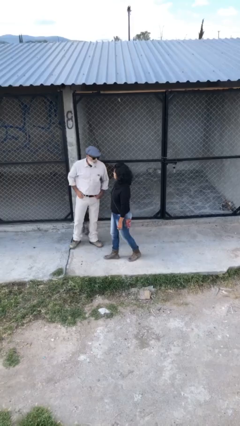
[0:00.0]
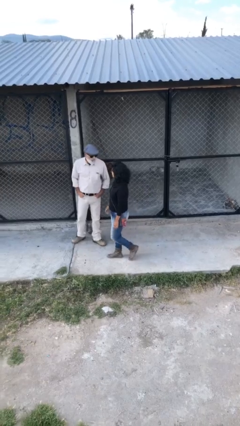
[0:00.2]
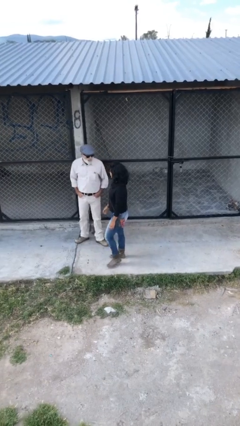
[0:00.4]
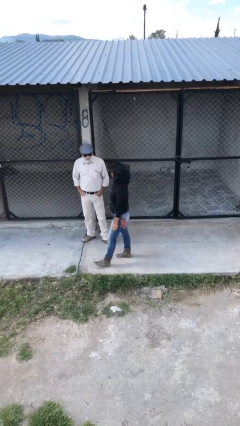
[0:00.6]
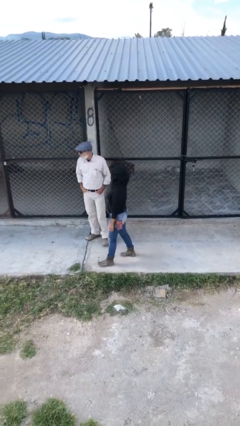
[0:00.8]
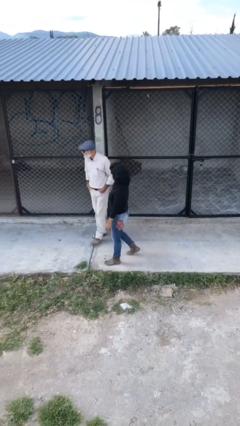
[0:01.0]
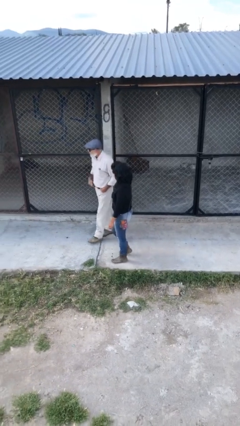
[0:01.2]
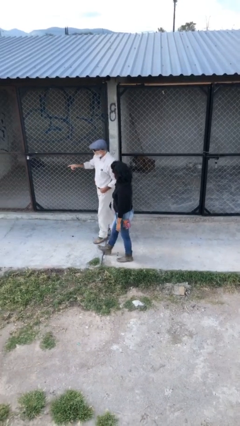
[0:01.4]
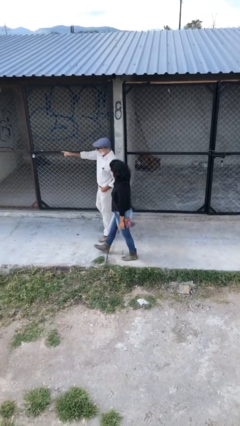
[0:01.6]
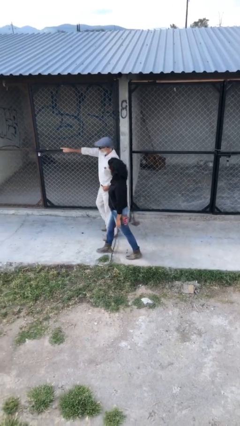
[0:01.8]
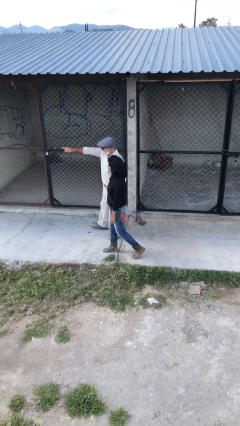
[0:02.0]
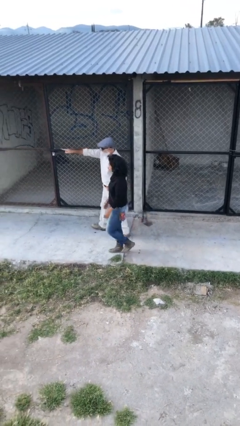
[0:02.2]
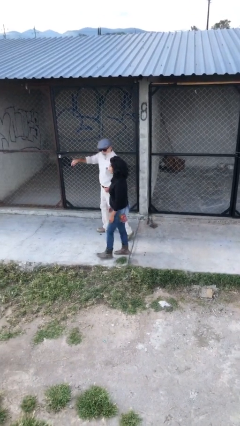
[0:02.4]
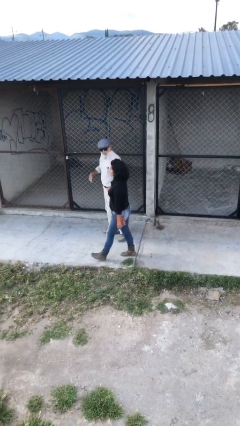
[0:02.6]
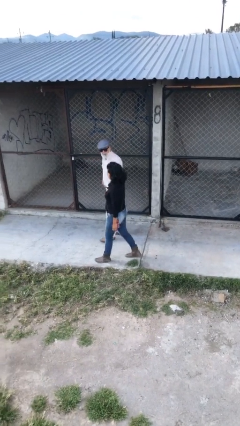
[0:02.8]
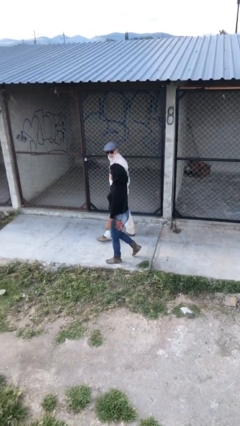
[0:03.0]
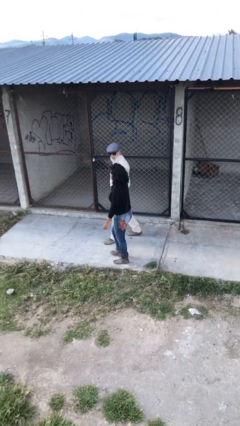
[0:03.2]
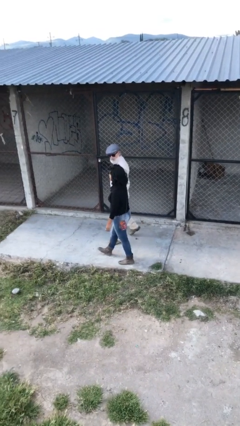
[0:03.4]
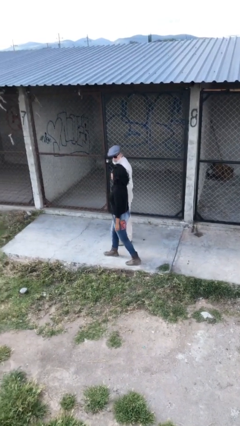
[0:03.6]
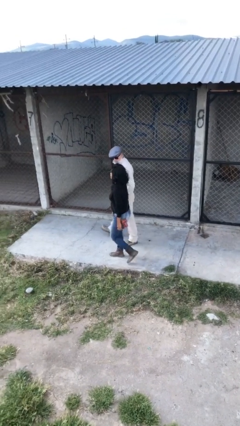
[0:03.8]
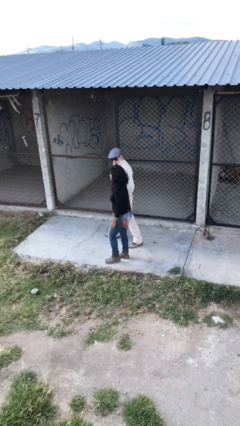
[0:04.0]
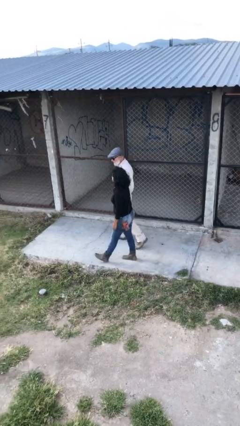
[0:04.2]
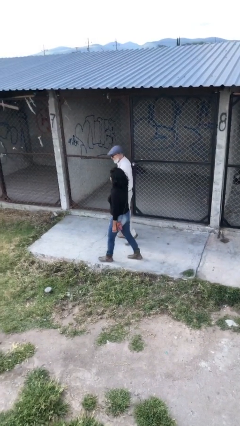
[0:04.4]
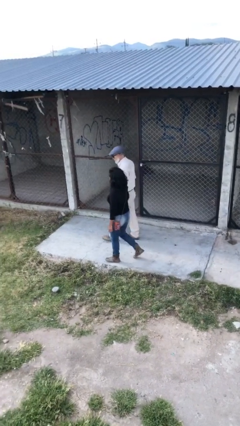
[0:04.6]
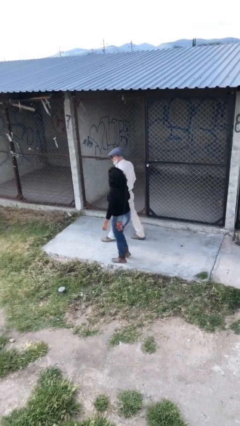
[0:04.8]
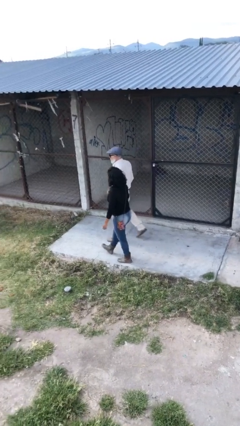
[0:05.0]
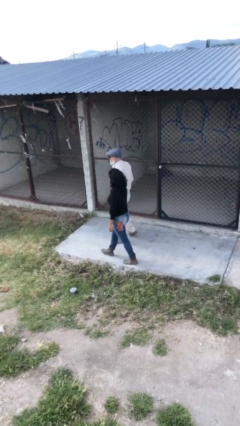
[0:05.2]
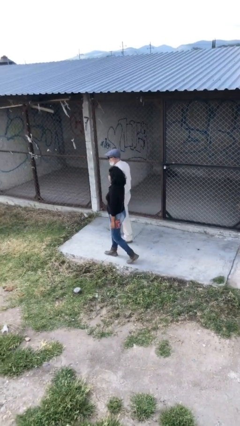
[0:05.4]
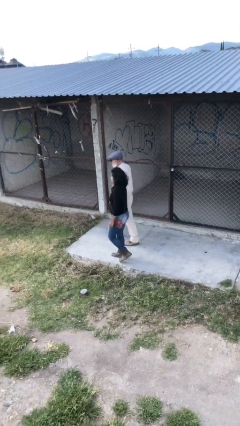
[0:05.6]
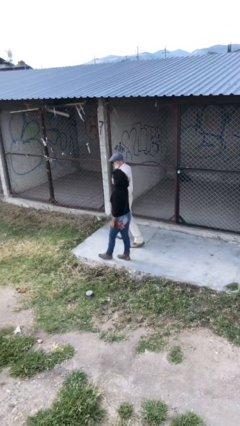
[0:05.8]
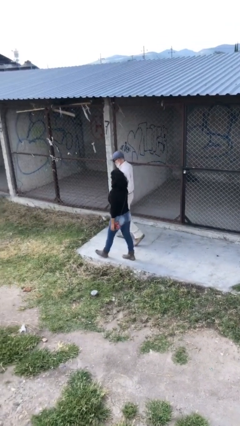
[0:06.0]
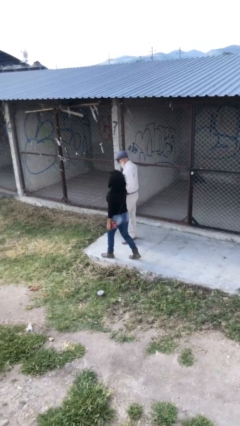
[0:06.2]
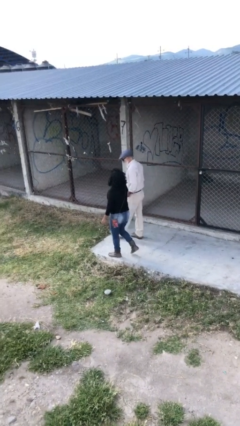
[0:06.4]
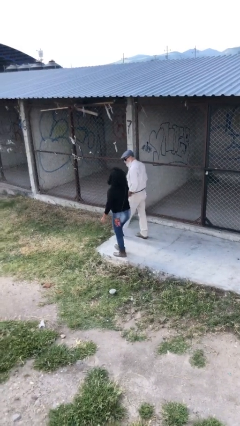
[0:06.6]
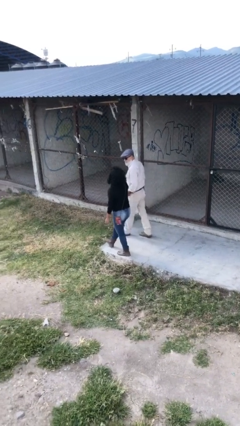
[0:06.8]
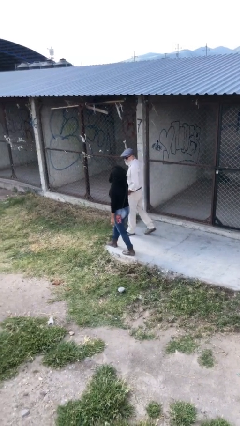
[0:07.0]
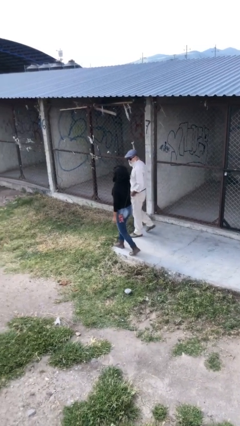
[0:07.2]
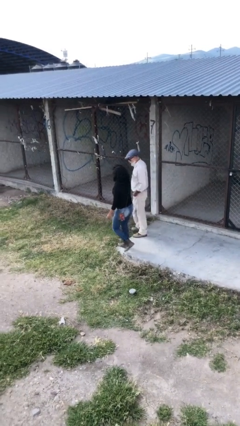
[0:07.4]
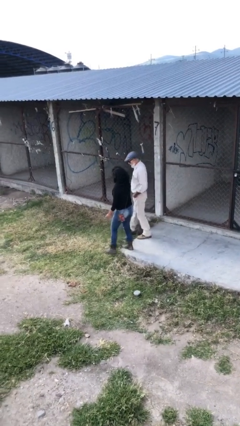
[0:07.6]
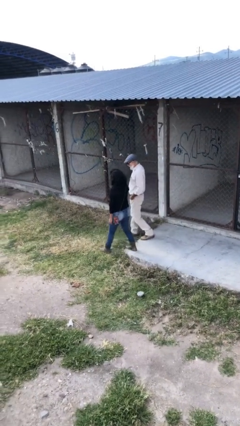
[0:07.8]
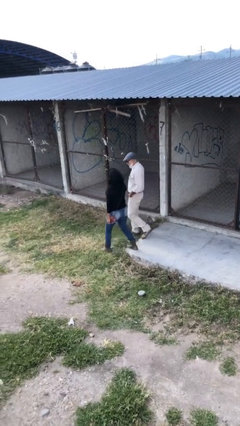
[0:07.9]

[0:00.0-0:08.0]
person talks to person

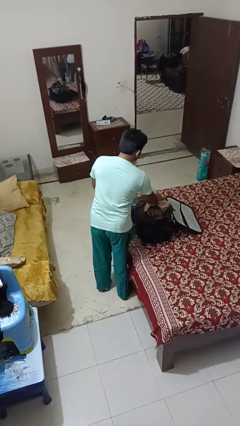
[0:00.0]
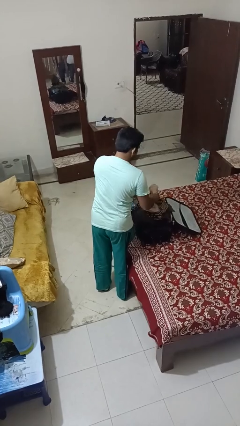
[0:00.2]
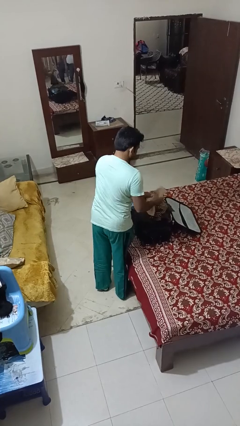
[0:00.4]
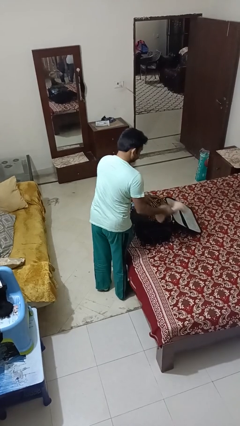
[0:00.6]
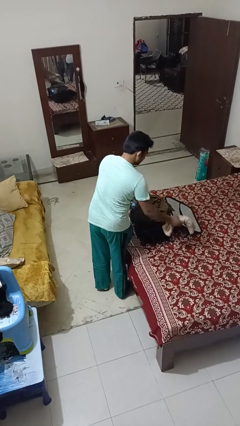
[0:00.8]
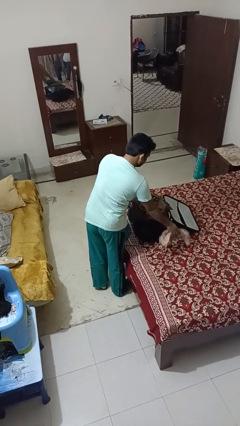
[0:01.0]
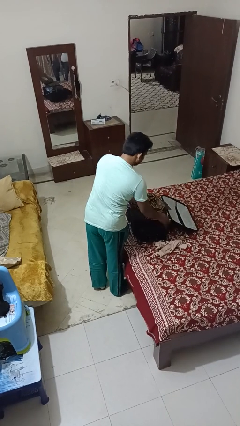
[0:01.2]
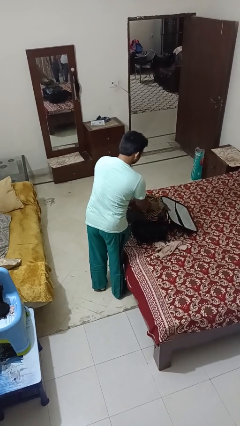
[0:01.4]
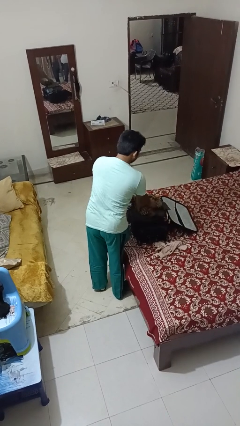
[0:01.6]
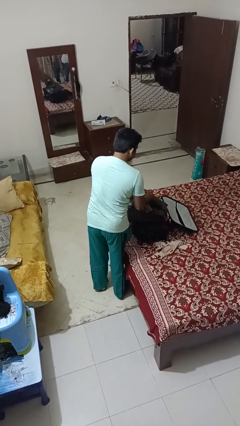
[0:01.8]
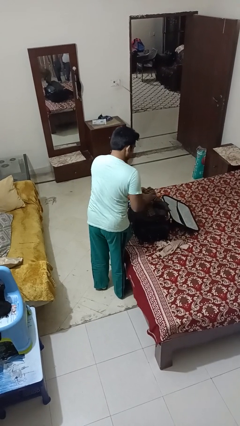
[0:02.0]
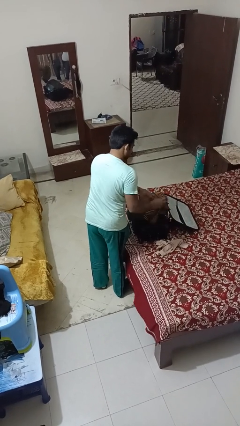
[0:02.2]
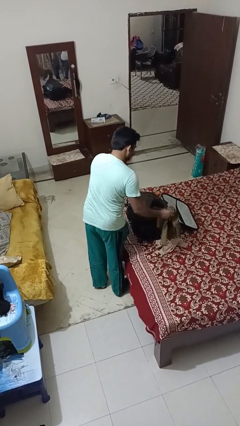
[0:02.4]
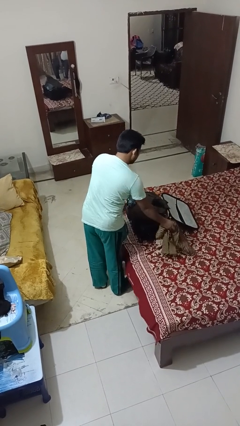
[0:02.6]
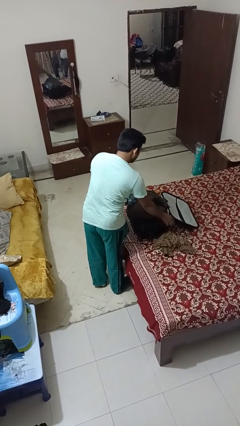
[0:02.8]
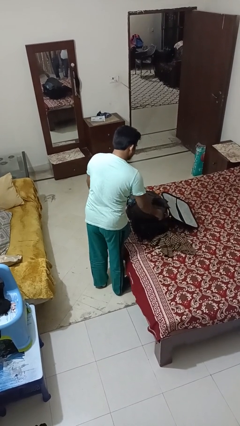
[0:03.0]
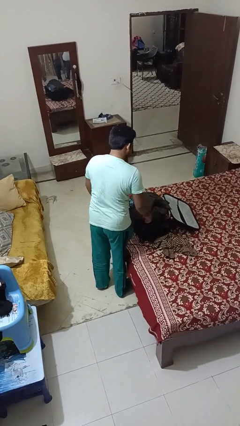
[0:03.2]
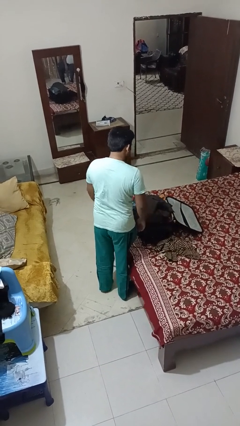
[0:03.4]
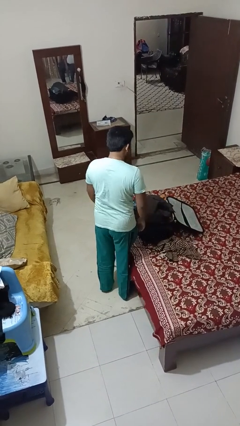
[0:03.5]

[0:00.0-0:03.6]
person unloads clothes from suitcase

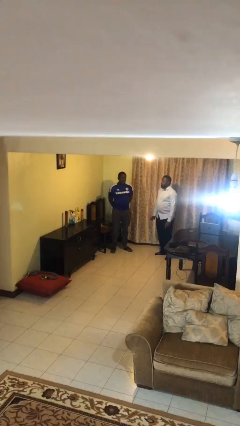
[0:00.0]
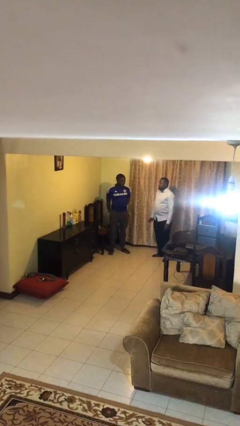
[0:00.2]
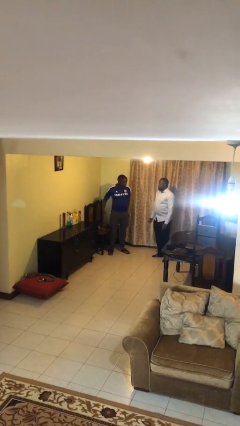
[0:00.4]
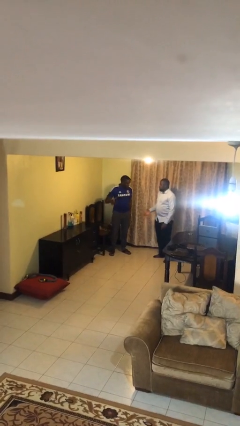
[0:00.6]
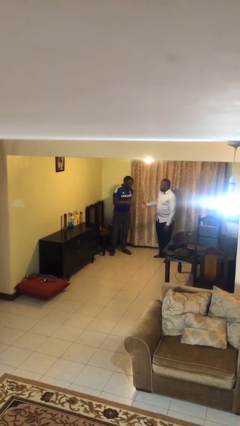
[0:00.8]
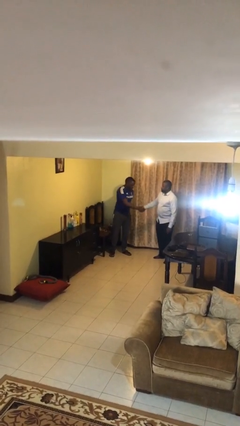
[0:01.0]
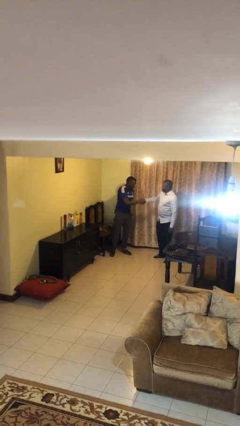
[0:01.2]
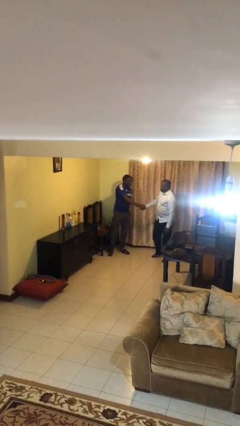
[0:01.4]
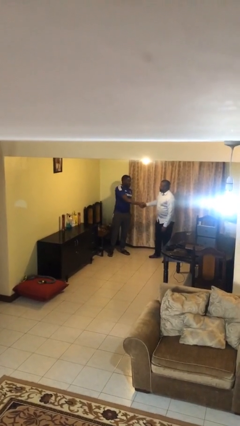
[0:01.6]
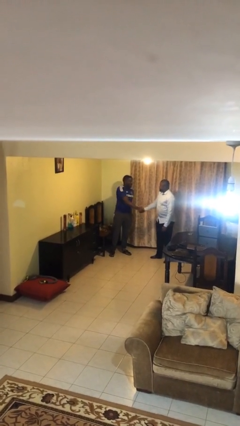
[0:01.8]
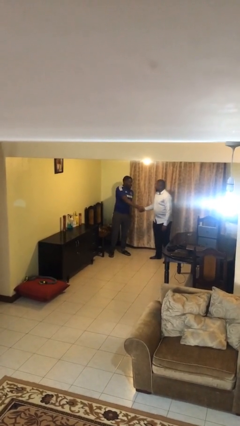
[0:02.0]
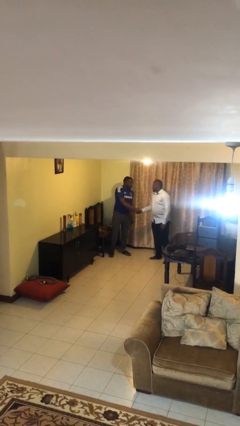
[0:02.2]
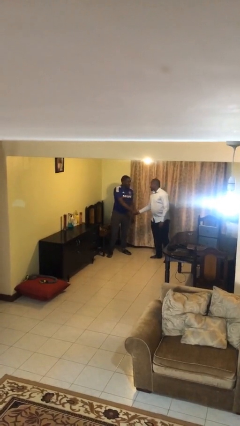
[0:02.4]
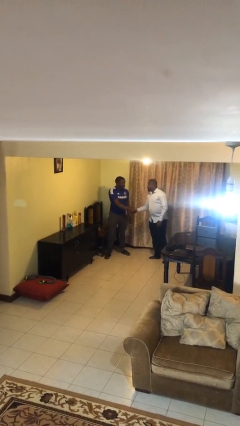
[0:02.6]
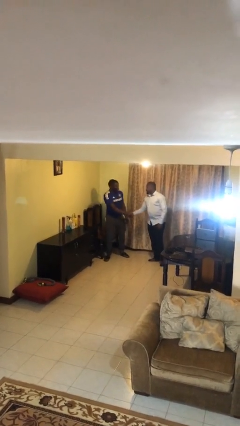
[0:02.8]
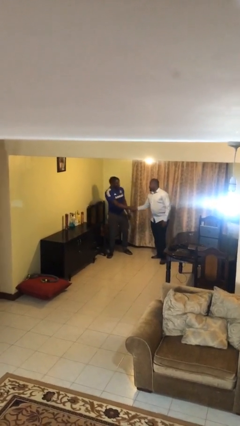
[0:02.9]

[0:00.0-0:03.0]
person shakes hand

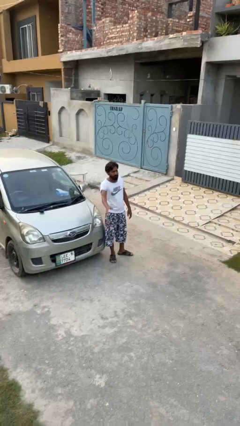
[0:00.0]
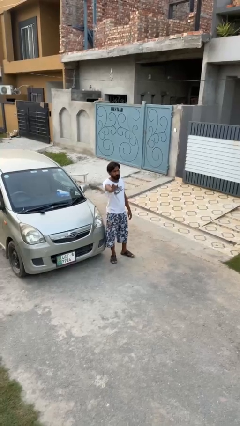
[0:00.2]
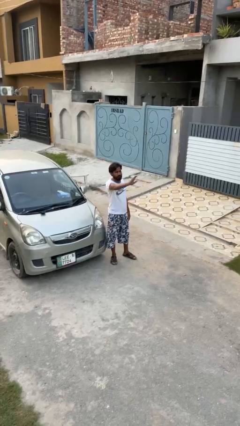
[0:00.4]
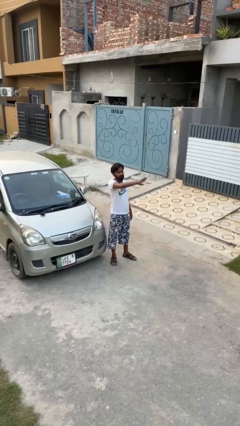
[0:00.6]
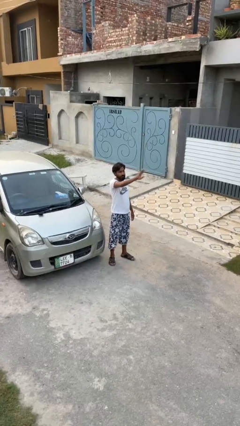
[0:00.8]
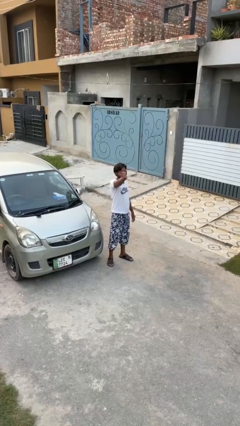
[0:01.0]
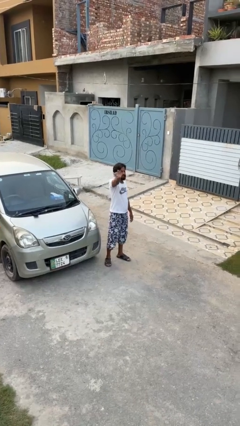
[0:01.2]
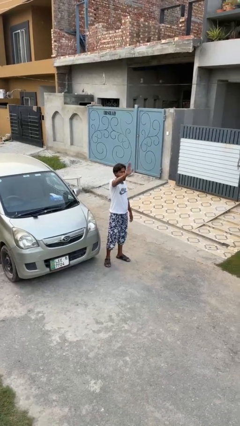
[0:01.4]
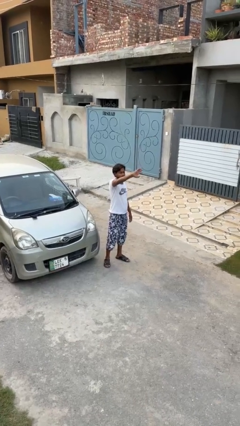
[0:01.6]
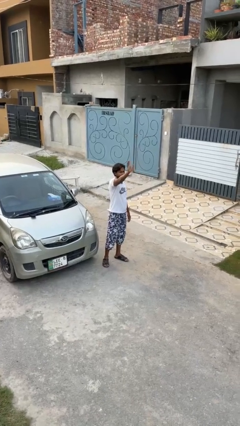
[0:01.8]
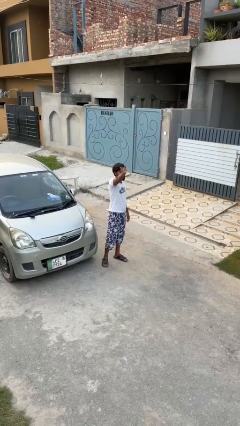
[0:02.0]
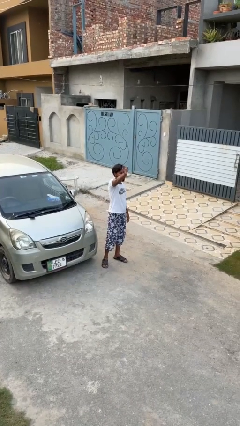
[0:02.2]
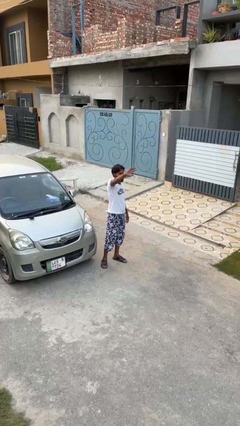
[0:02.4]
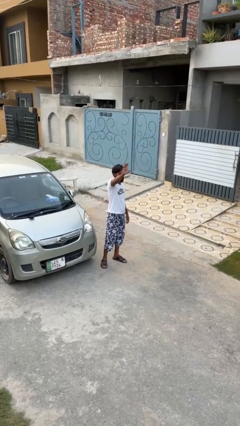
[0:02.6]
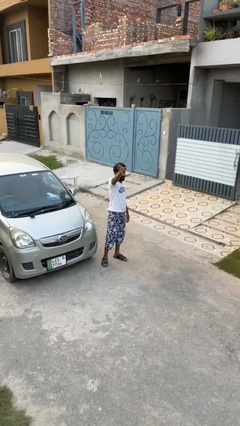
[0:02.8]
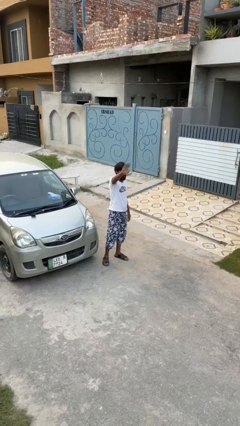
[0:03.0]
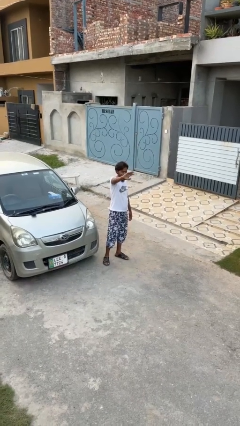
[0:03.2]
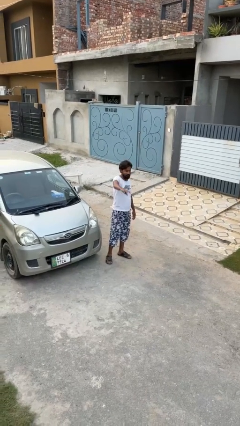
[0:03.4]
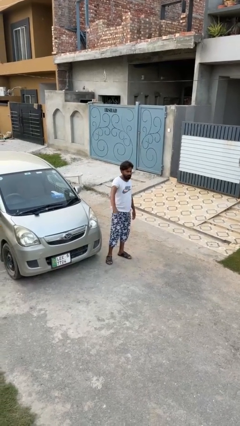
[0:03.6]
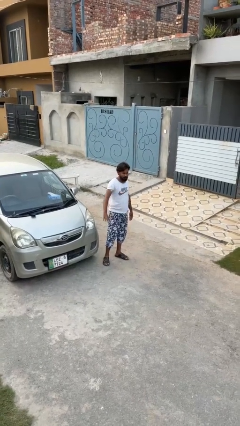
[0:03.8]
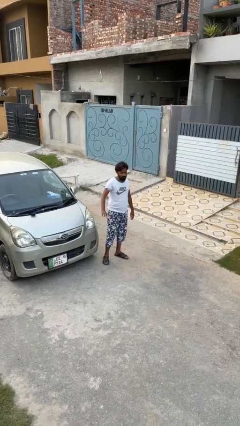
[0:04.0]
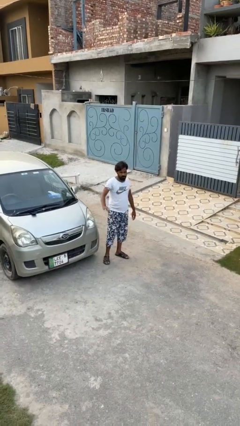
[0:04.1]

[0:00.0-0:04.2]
person waves at person
